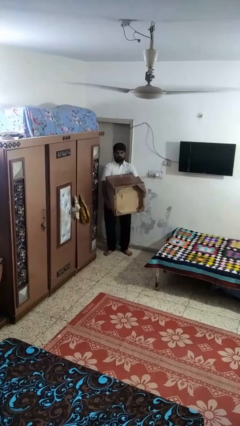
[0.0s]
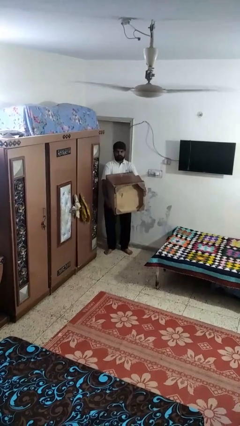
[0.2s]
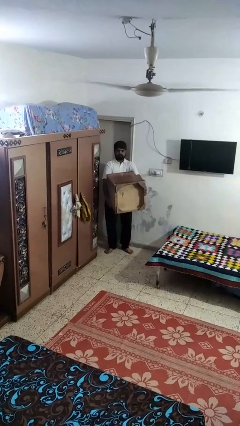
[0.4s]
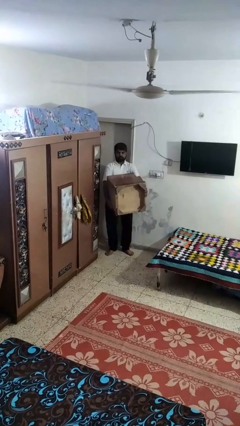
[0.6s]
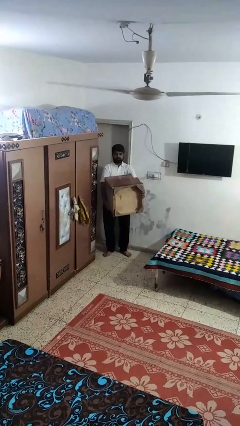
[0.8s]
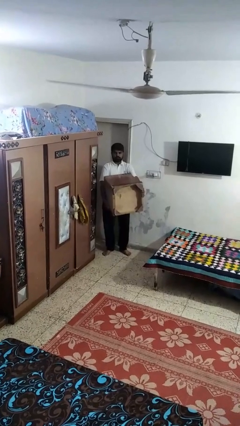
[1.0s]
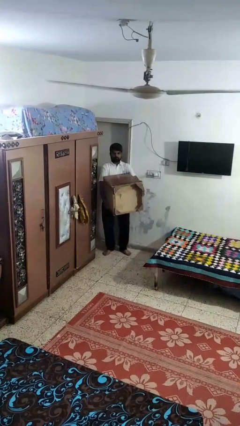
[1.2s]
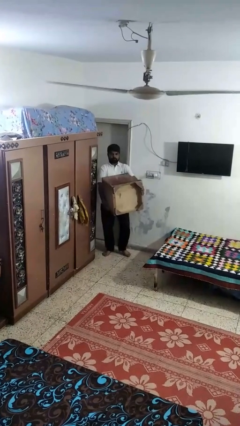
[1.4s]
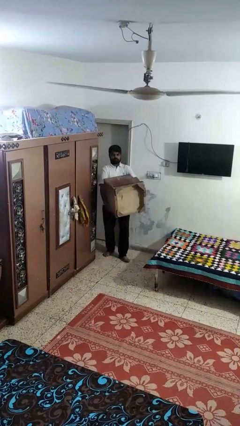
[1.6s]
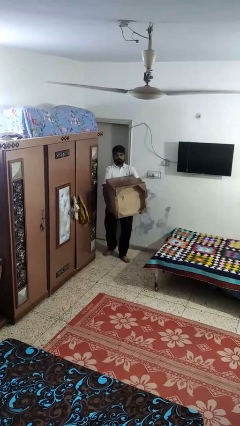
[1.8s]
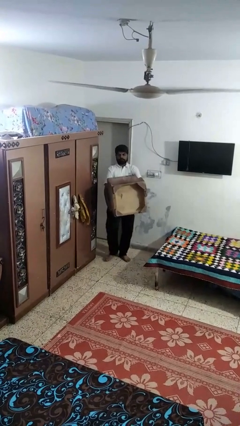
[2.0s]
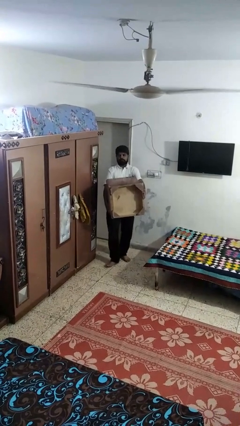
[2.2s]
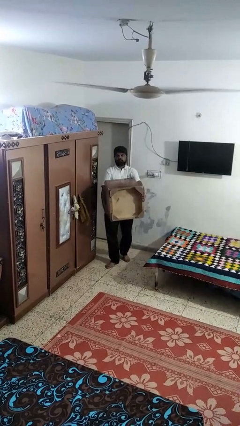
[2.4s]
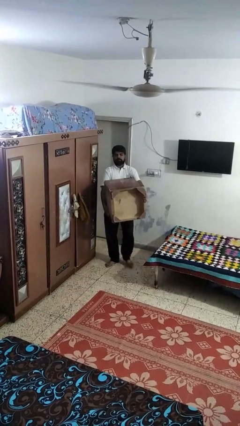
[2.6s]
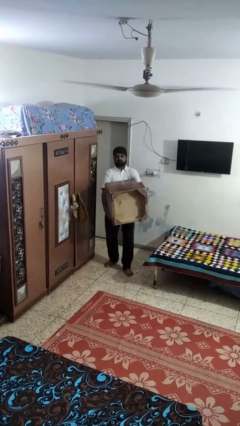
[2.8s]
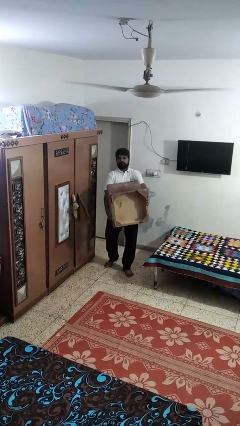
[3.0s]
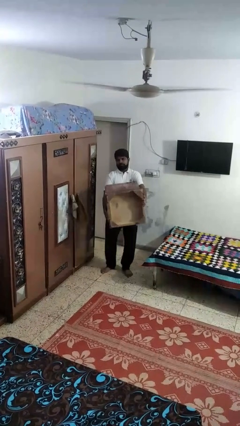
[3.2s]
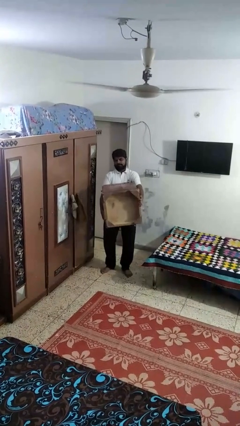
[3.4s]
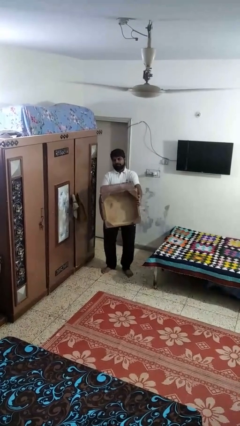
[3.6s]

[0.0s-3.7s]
person carries furniture

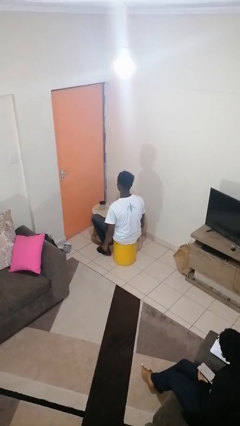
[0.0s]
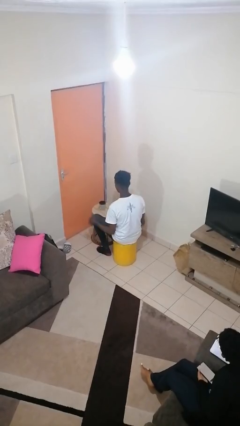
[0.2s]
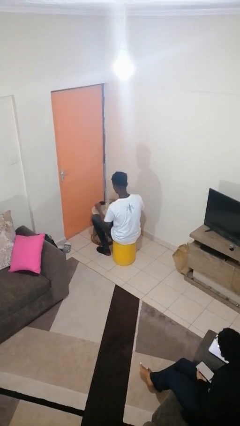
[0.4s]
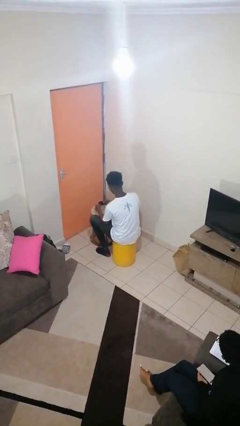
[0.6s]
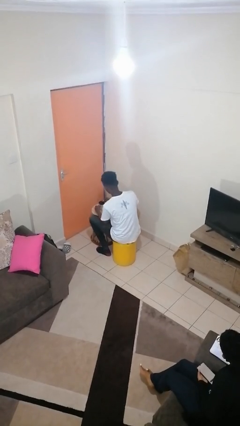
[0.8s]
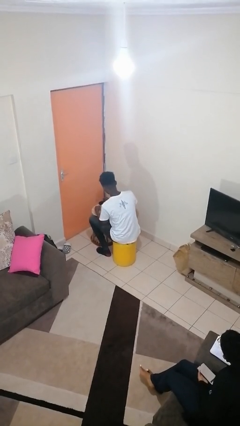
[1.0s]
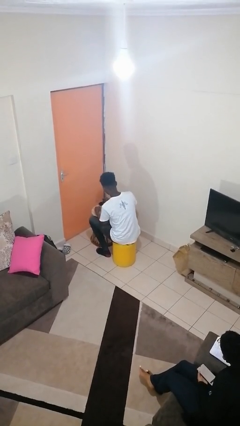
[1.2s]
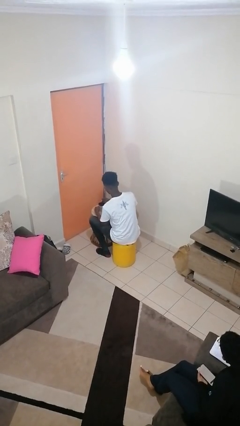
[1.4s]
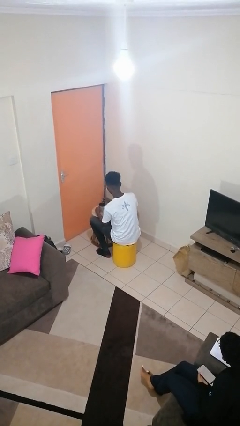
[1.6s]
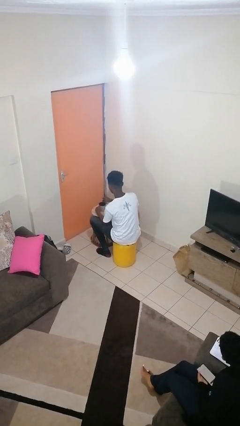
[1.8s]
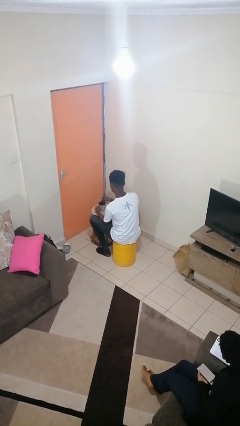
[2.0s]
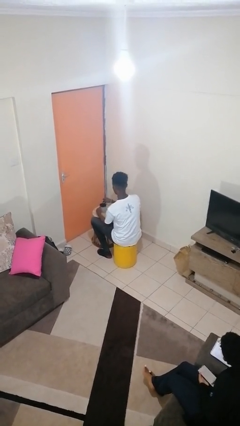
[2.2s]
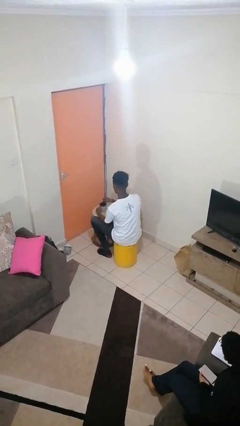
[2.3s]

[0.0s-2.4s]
person stirs mug

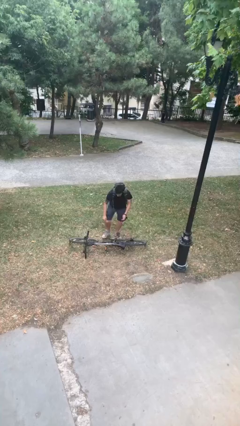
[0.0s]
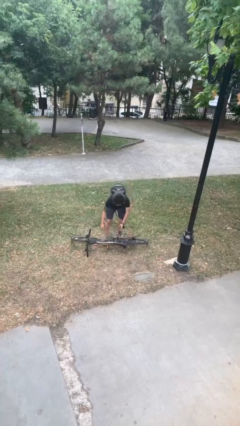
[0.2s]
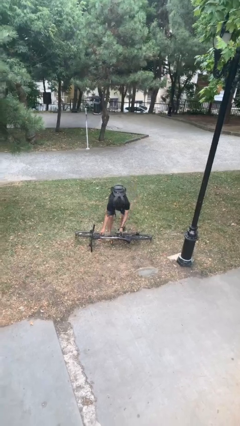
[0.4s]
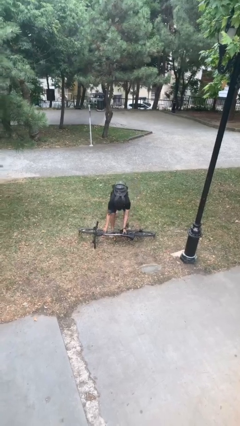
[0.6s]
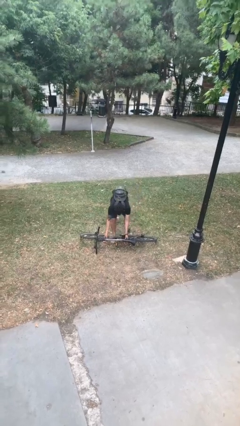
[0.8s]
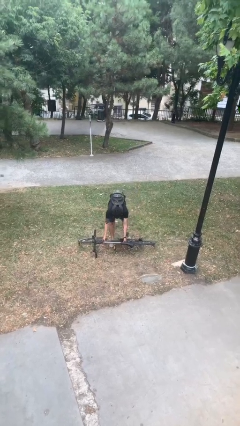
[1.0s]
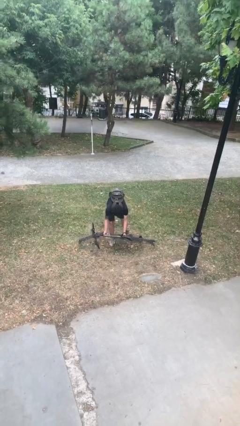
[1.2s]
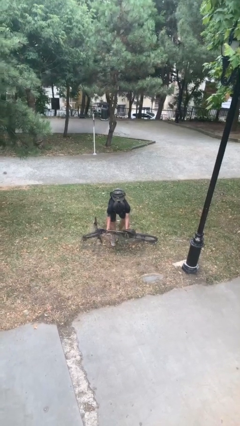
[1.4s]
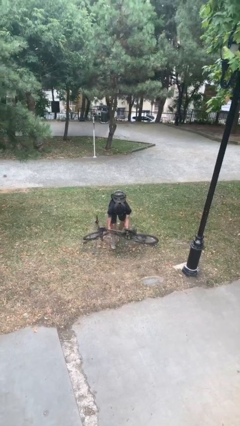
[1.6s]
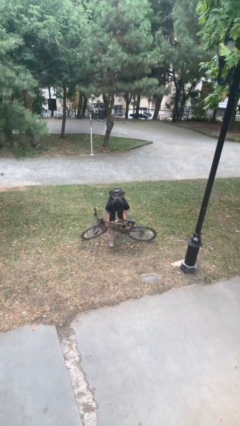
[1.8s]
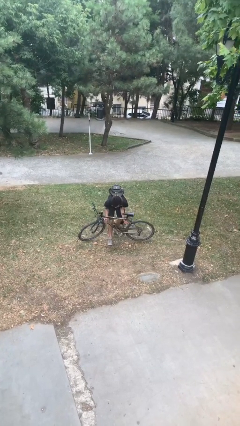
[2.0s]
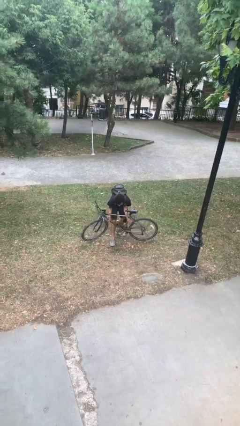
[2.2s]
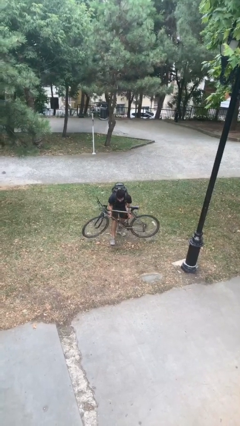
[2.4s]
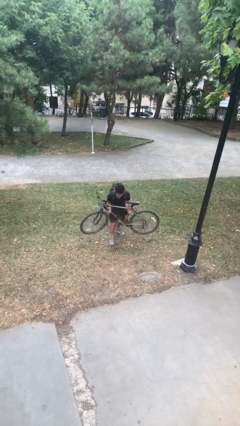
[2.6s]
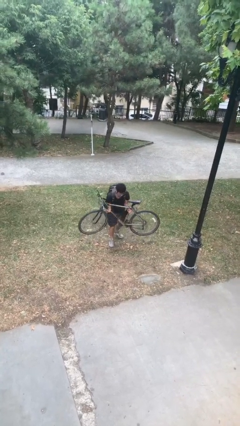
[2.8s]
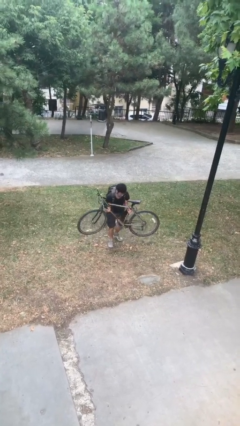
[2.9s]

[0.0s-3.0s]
person picks up object from floor

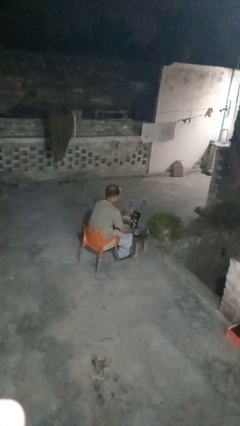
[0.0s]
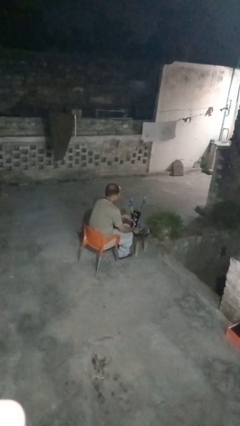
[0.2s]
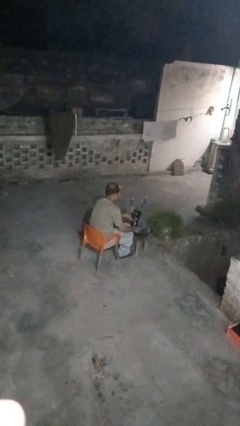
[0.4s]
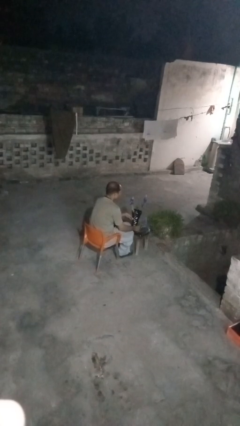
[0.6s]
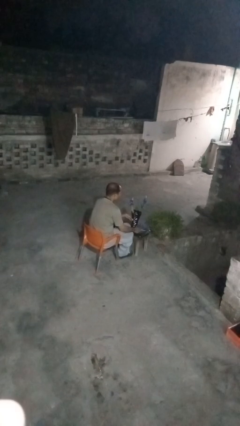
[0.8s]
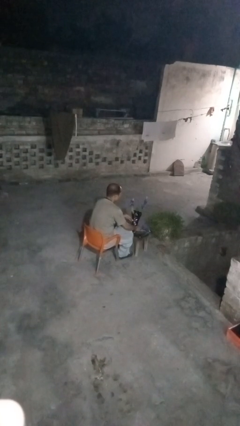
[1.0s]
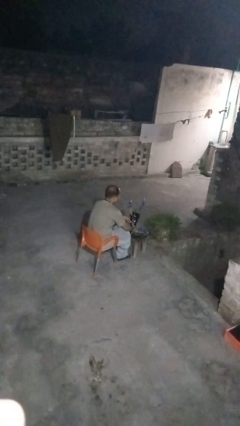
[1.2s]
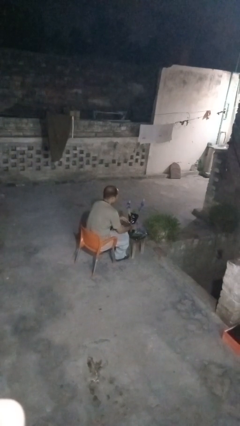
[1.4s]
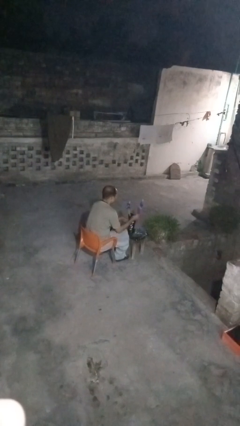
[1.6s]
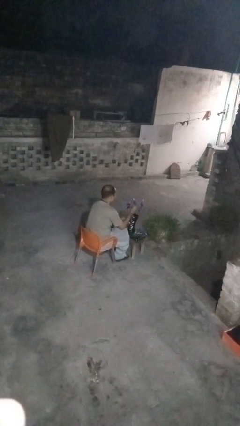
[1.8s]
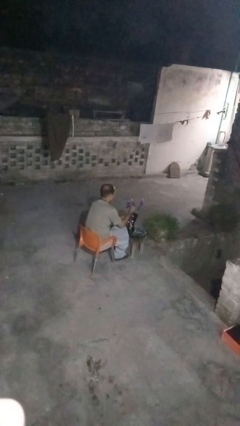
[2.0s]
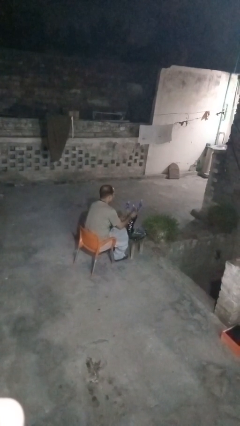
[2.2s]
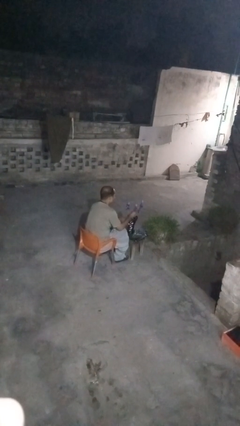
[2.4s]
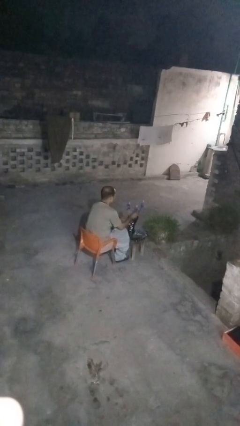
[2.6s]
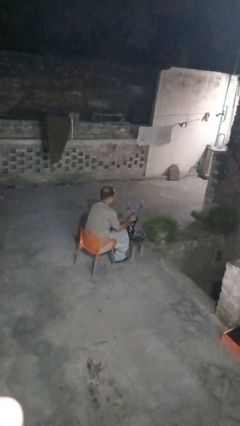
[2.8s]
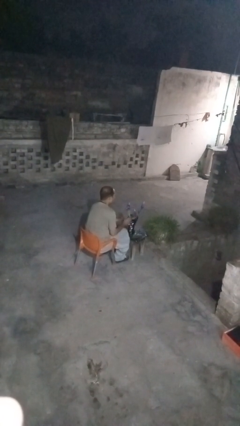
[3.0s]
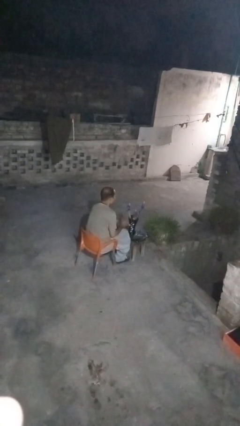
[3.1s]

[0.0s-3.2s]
person arranges flowers in vase

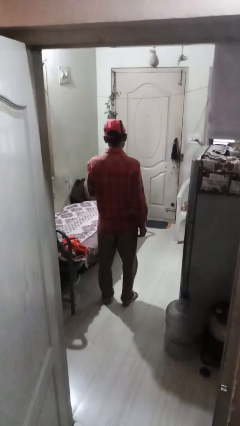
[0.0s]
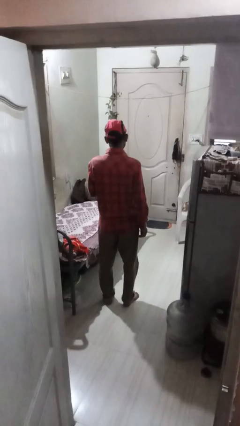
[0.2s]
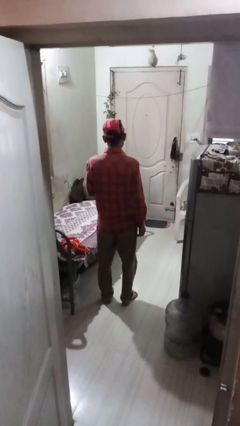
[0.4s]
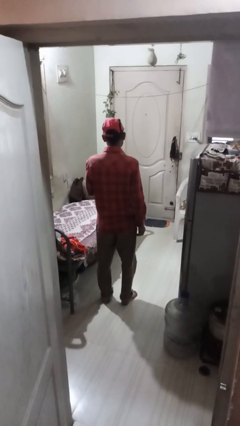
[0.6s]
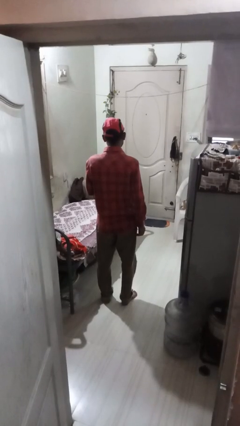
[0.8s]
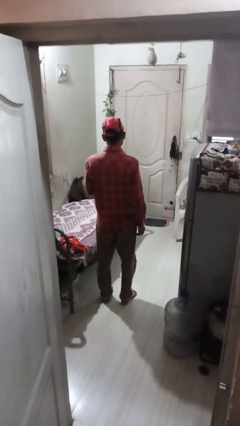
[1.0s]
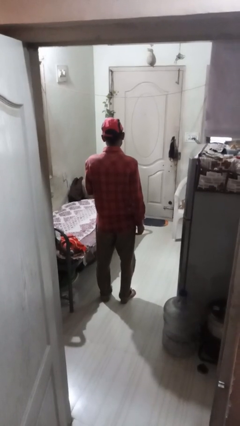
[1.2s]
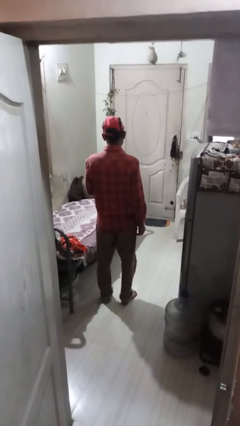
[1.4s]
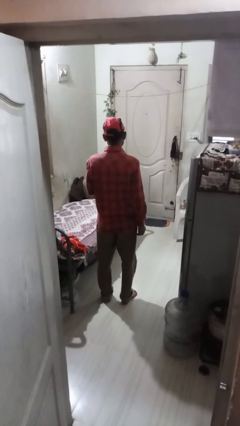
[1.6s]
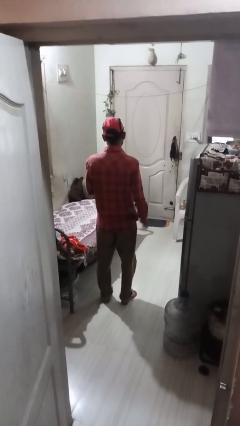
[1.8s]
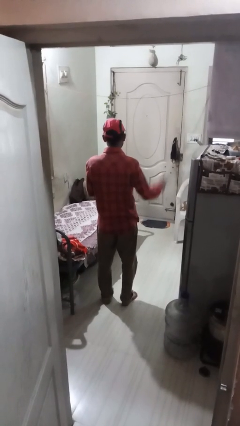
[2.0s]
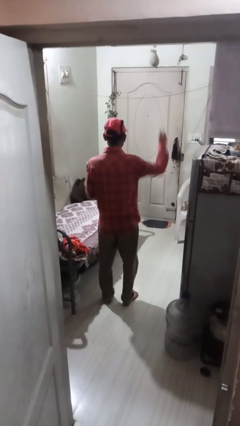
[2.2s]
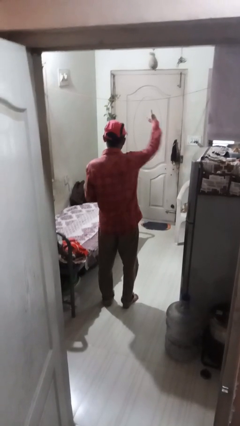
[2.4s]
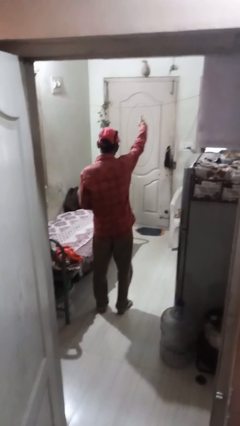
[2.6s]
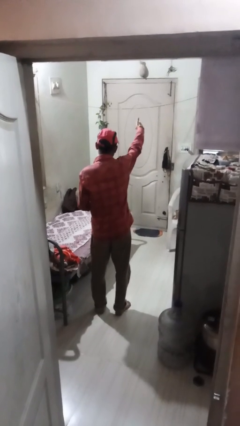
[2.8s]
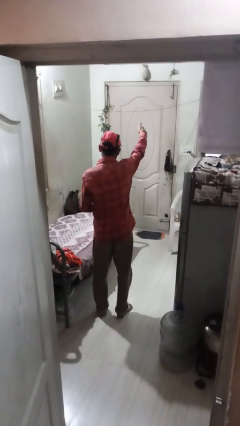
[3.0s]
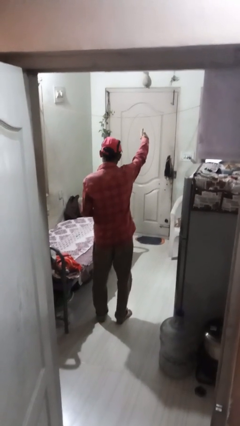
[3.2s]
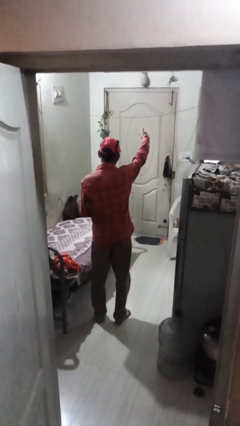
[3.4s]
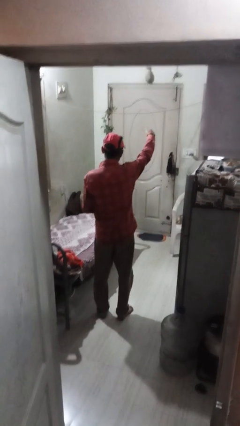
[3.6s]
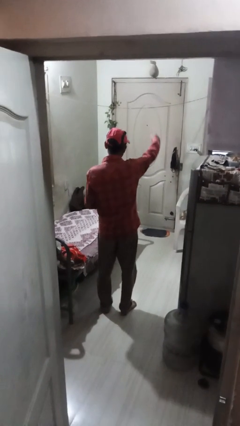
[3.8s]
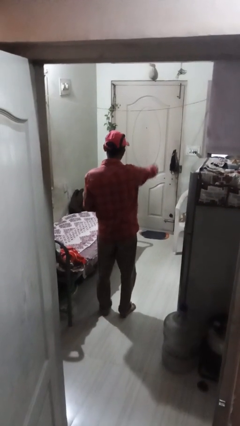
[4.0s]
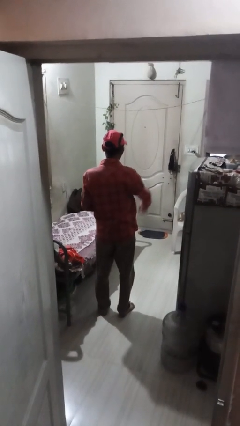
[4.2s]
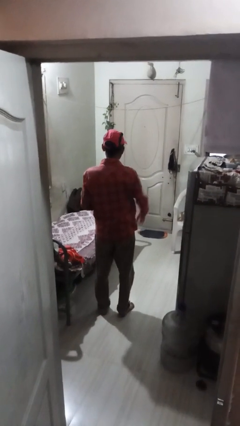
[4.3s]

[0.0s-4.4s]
person points at person

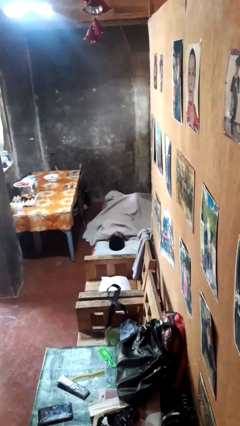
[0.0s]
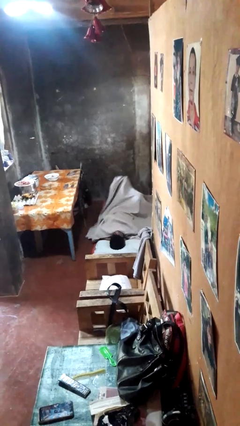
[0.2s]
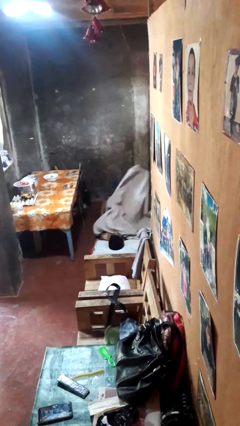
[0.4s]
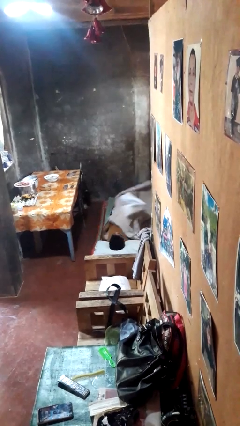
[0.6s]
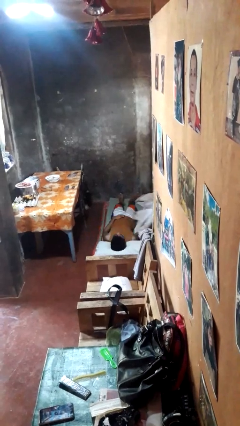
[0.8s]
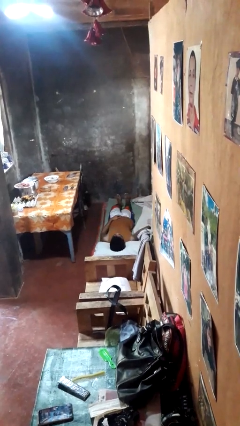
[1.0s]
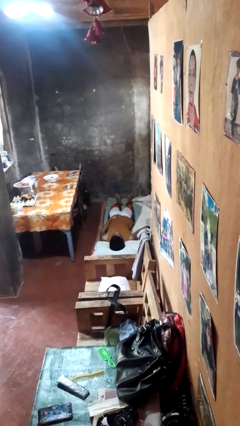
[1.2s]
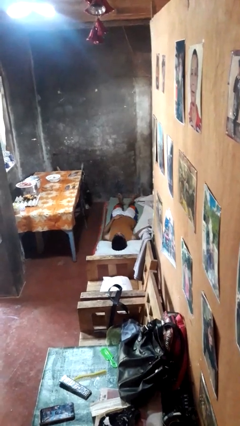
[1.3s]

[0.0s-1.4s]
person uncovers with bedsheets
